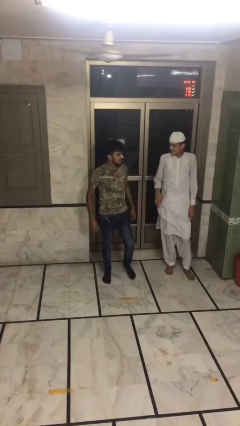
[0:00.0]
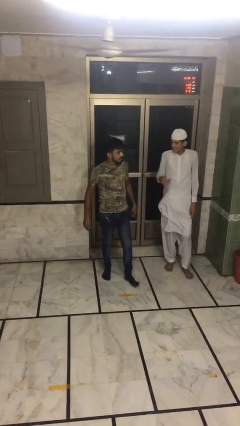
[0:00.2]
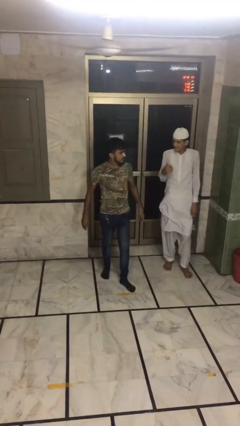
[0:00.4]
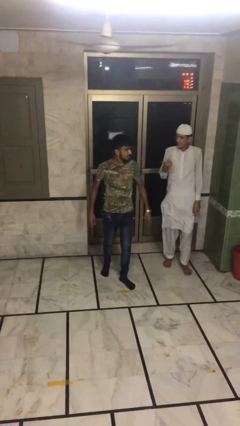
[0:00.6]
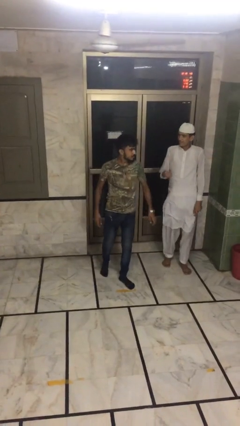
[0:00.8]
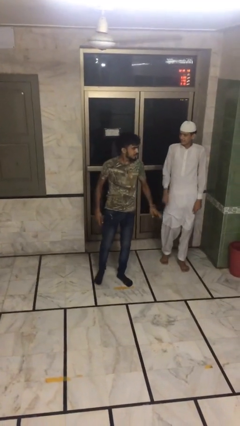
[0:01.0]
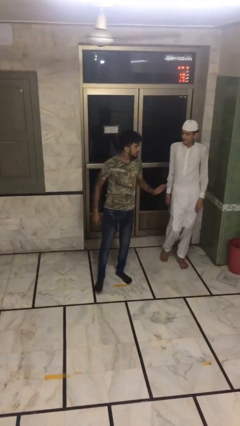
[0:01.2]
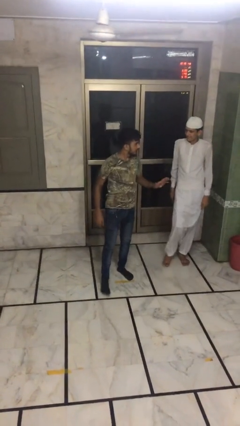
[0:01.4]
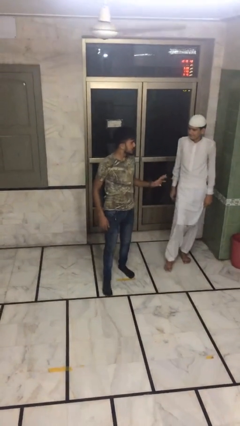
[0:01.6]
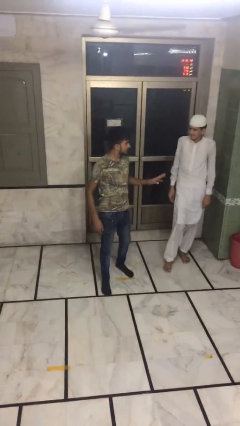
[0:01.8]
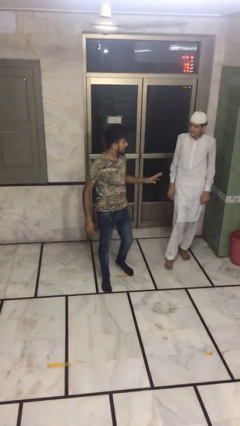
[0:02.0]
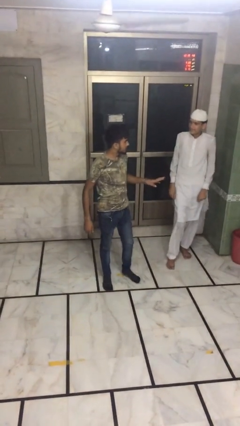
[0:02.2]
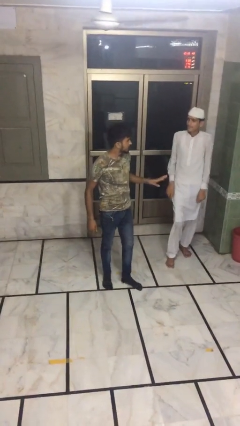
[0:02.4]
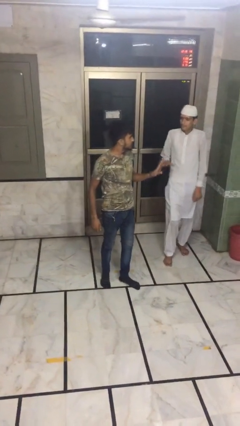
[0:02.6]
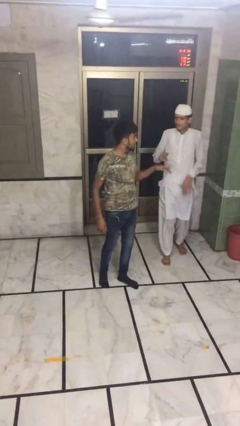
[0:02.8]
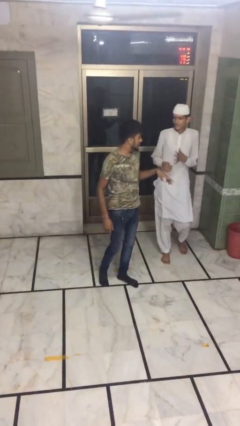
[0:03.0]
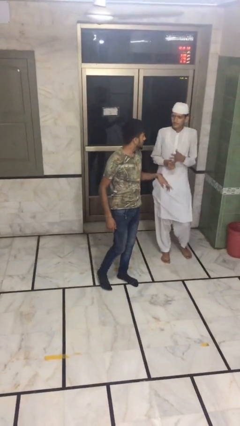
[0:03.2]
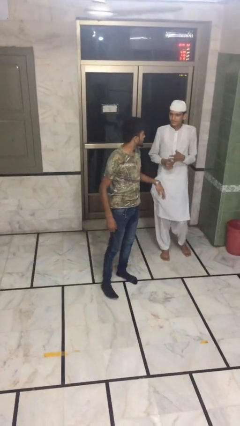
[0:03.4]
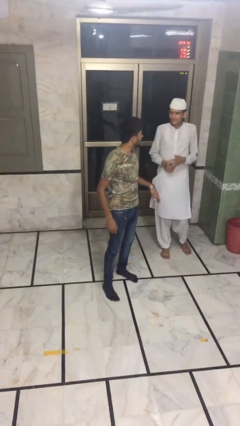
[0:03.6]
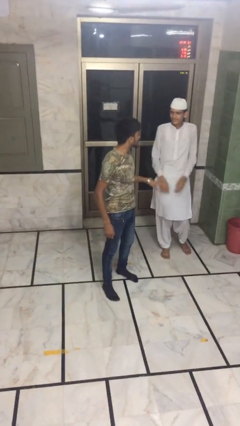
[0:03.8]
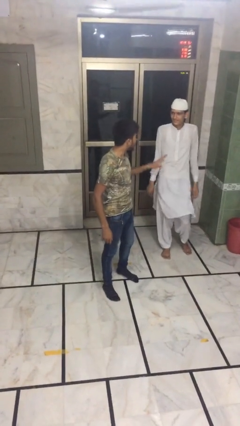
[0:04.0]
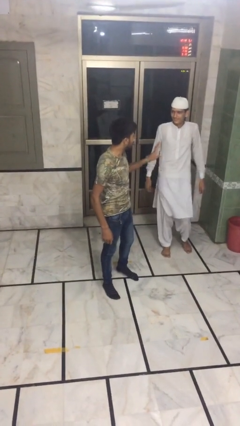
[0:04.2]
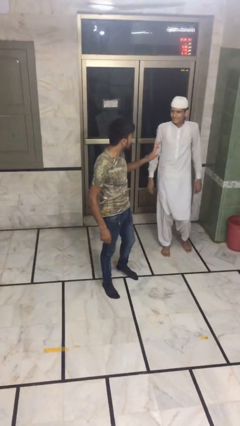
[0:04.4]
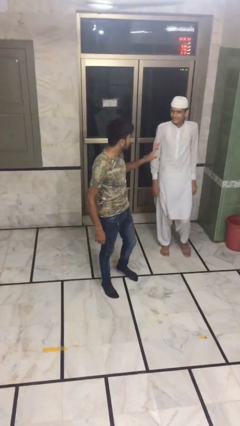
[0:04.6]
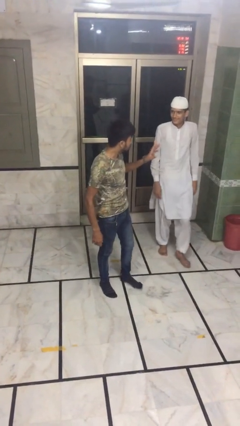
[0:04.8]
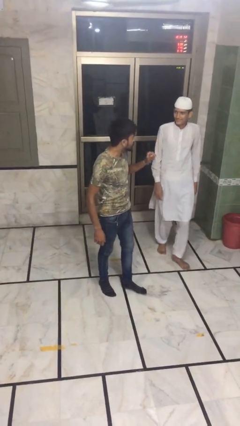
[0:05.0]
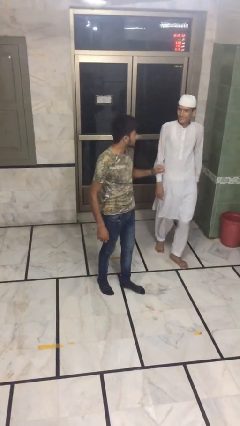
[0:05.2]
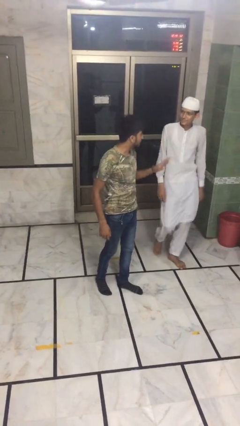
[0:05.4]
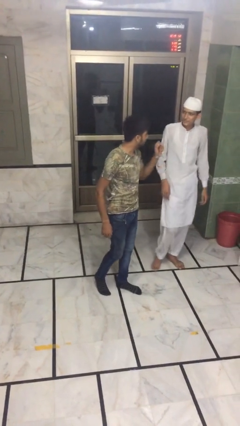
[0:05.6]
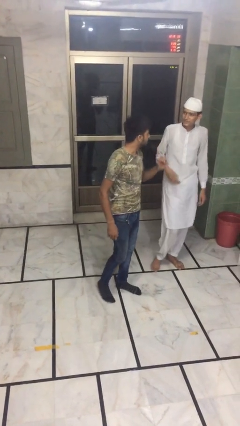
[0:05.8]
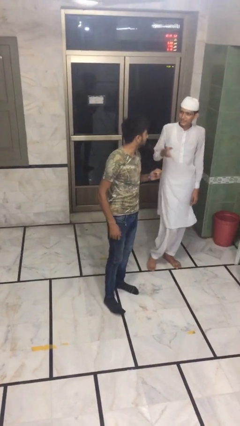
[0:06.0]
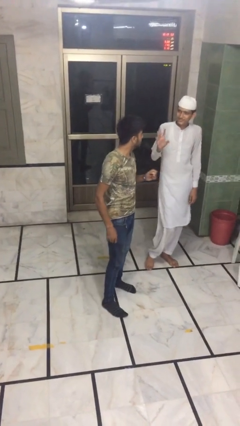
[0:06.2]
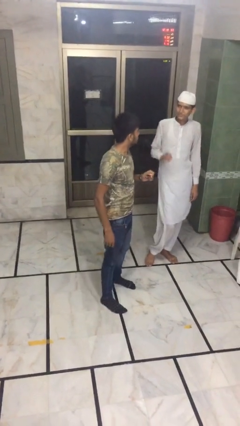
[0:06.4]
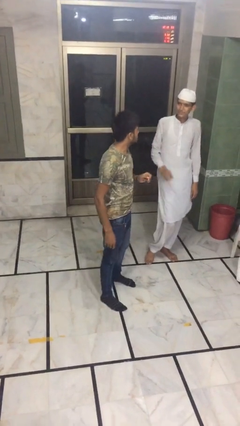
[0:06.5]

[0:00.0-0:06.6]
person talks to person

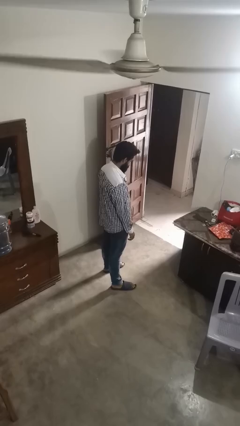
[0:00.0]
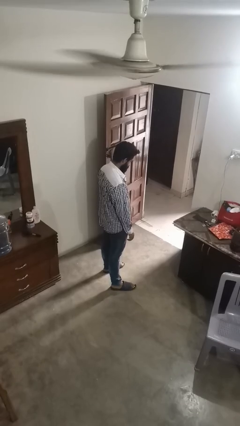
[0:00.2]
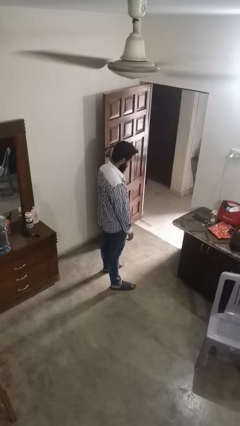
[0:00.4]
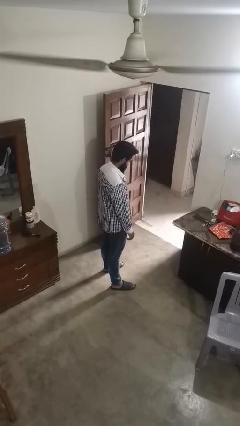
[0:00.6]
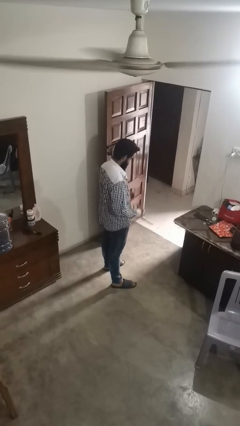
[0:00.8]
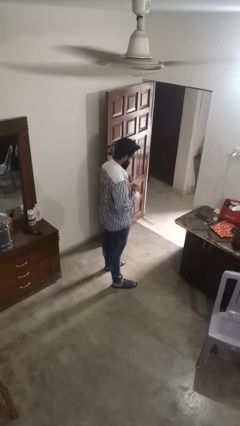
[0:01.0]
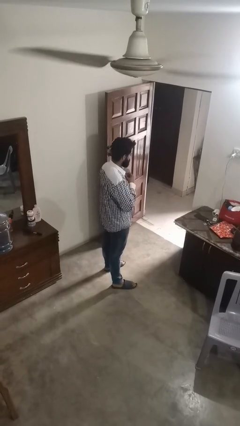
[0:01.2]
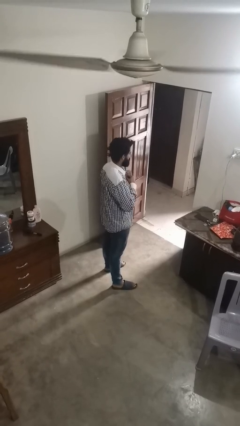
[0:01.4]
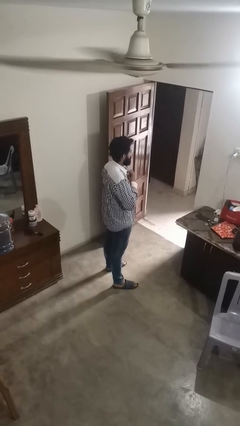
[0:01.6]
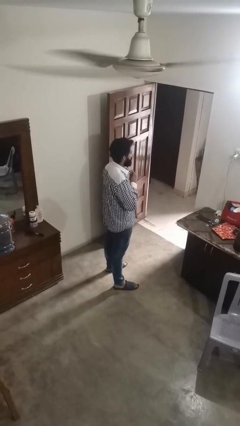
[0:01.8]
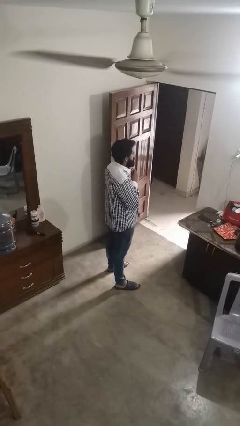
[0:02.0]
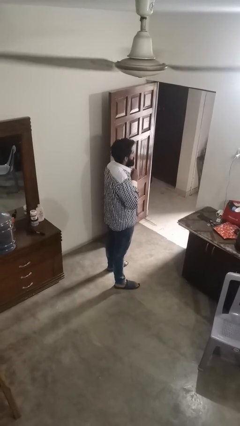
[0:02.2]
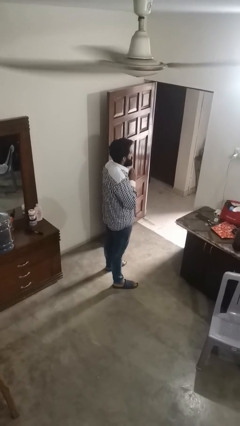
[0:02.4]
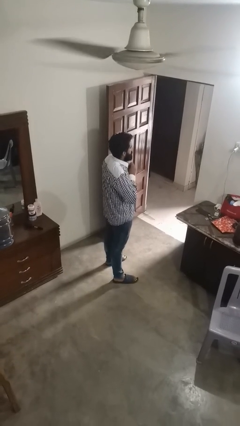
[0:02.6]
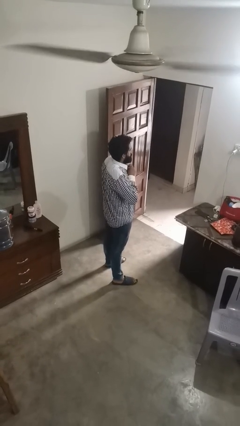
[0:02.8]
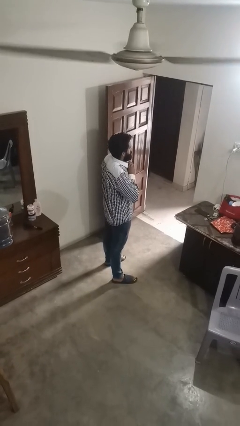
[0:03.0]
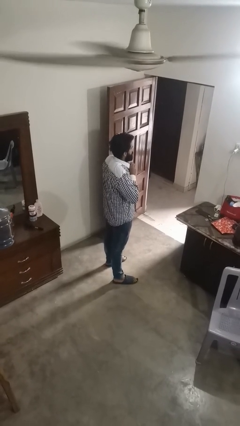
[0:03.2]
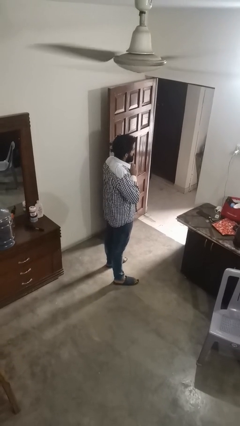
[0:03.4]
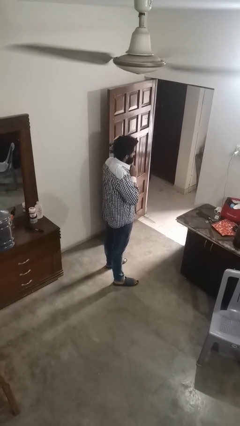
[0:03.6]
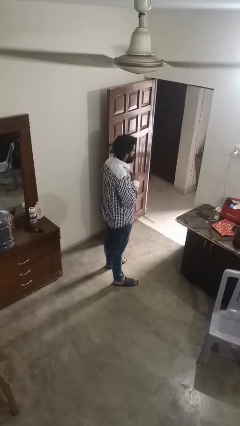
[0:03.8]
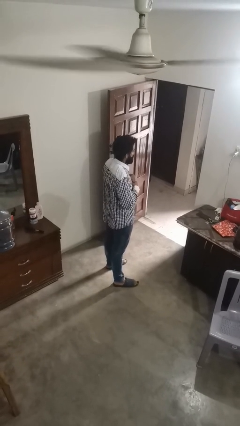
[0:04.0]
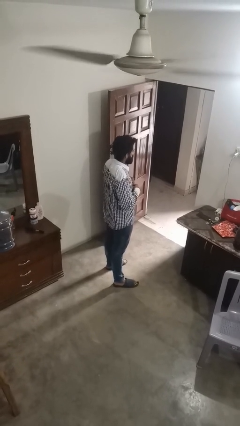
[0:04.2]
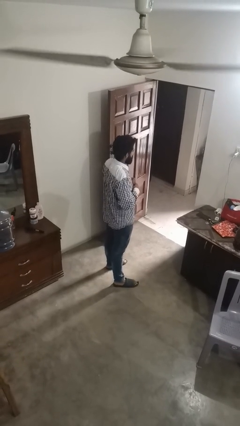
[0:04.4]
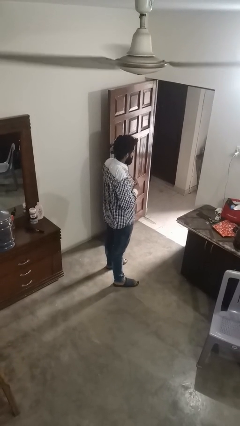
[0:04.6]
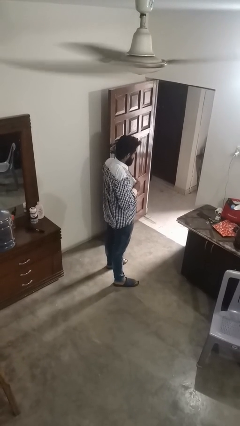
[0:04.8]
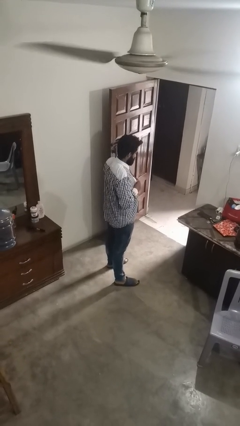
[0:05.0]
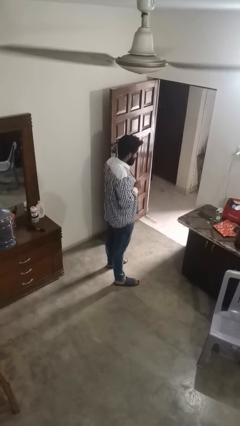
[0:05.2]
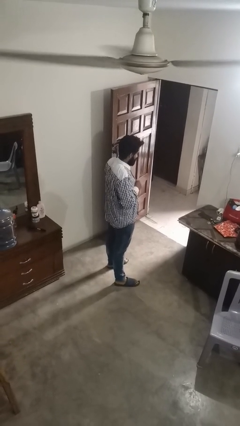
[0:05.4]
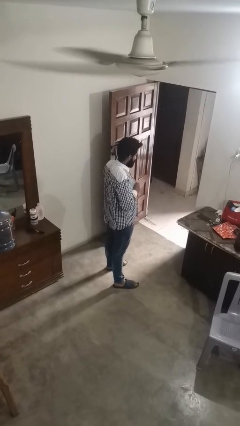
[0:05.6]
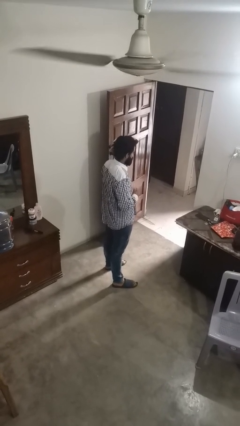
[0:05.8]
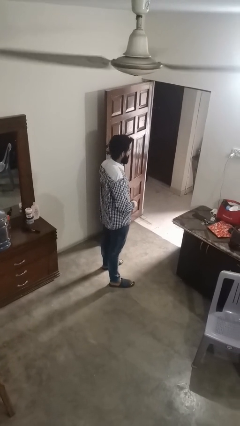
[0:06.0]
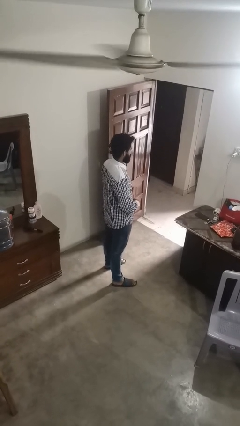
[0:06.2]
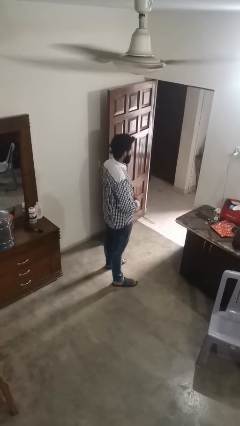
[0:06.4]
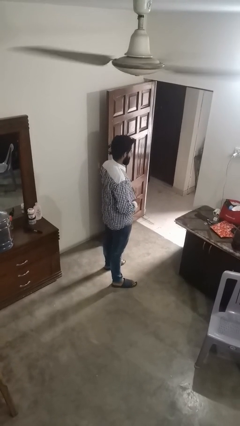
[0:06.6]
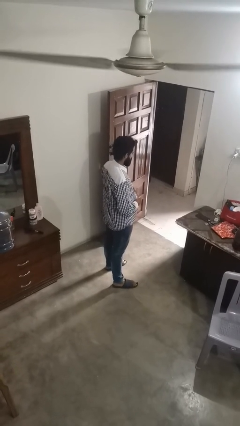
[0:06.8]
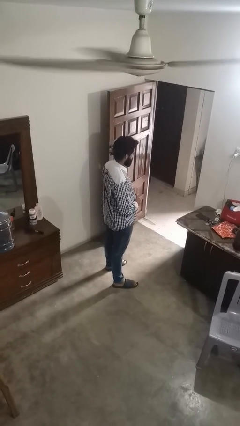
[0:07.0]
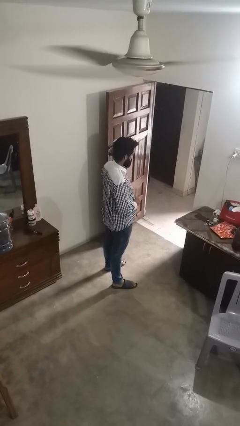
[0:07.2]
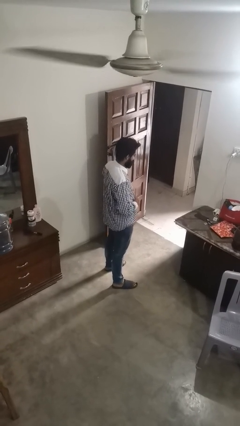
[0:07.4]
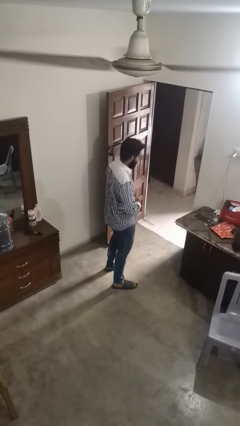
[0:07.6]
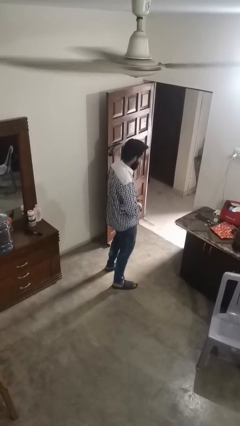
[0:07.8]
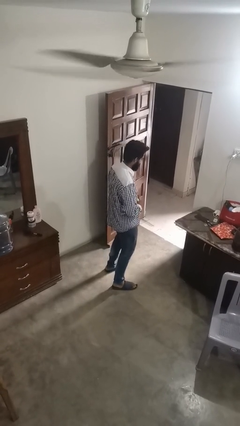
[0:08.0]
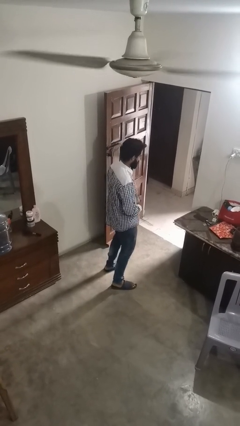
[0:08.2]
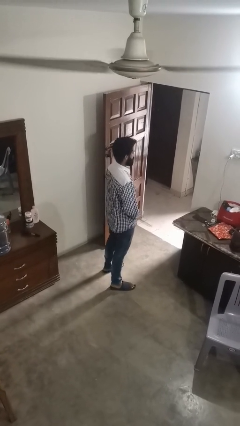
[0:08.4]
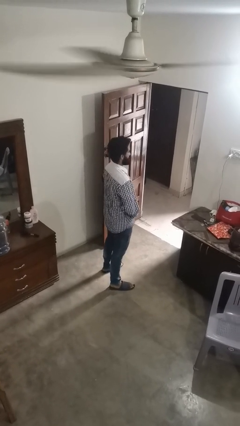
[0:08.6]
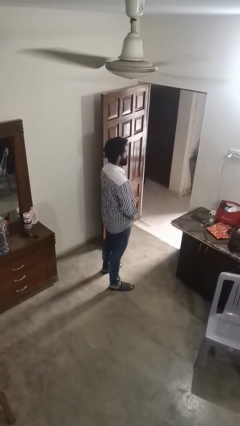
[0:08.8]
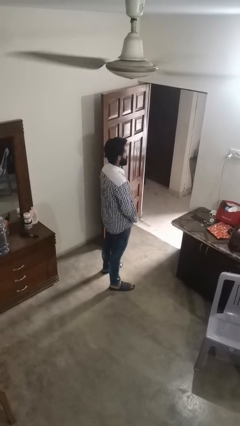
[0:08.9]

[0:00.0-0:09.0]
person buttons shirt

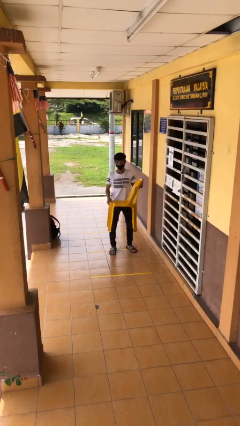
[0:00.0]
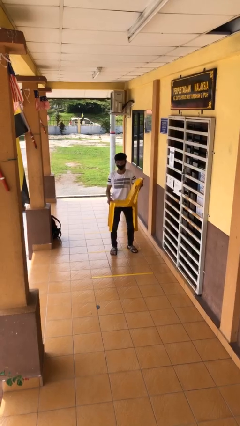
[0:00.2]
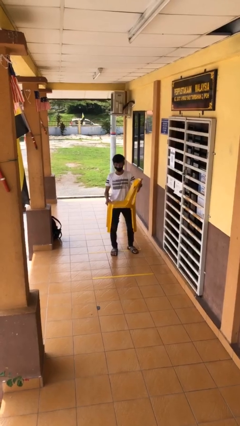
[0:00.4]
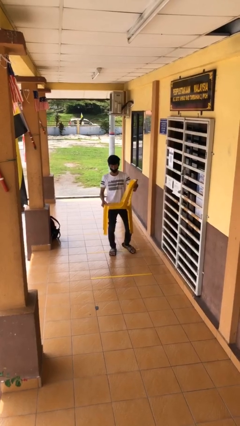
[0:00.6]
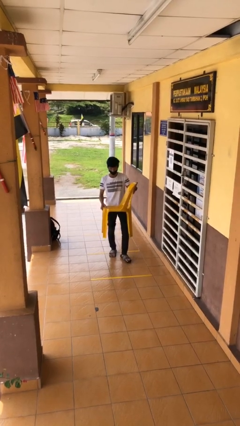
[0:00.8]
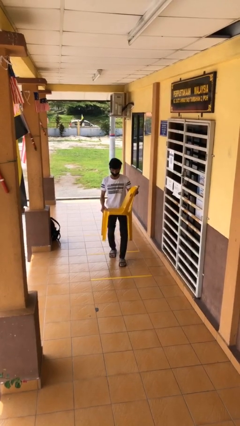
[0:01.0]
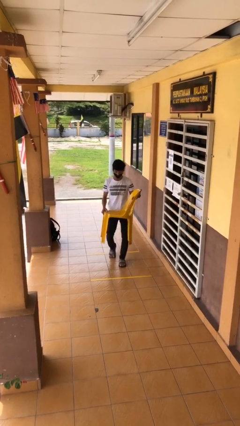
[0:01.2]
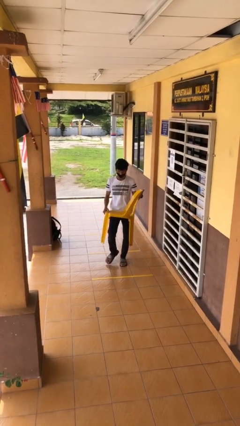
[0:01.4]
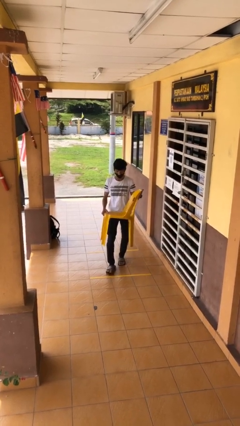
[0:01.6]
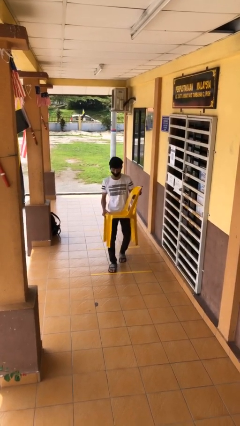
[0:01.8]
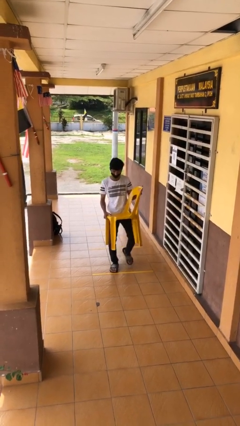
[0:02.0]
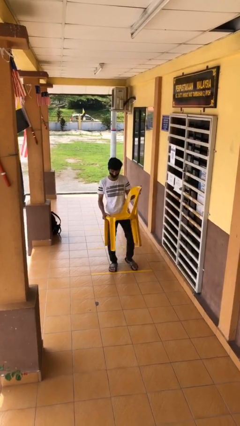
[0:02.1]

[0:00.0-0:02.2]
person carries heavy object
